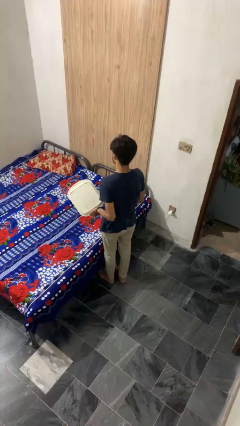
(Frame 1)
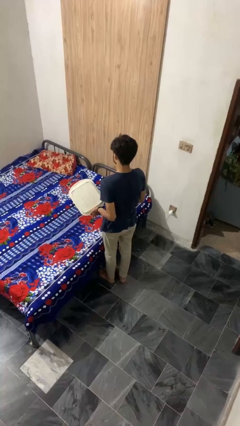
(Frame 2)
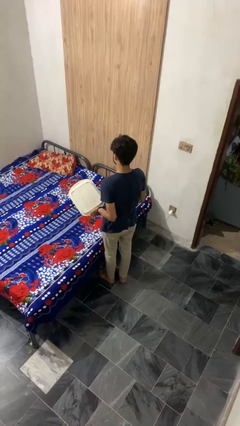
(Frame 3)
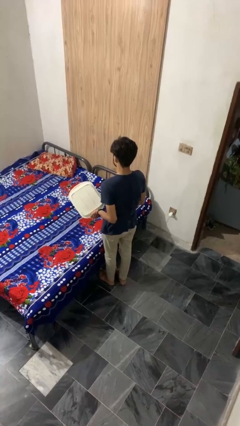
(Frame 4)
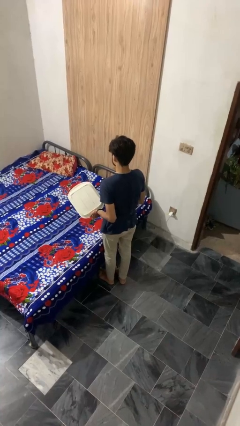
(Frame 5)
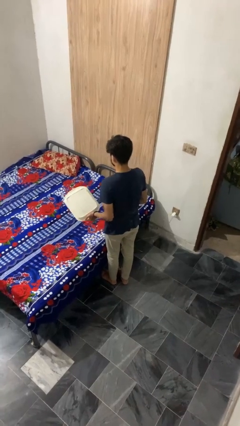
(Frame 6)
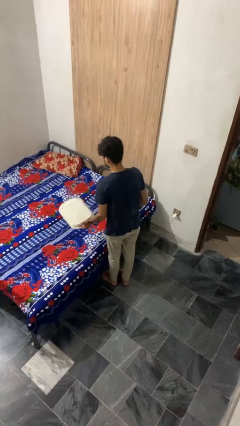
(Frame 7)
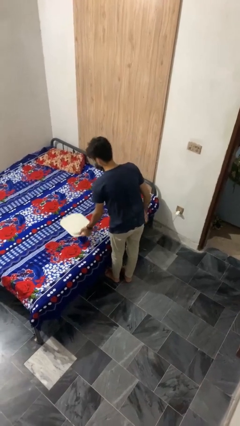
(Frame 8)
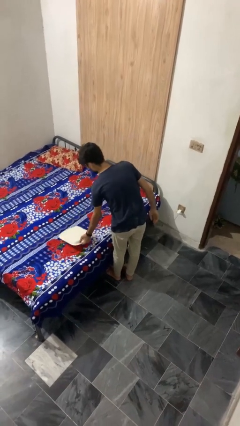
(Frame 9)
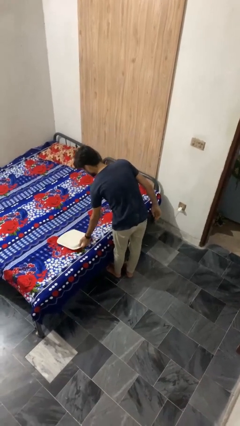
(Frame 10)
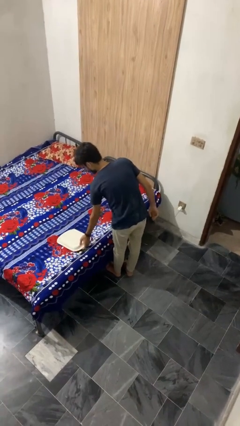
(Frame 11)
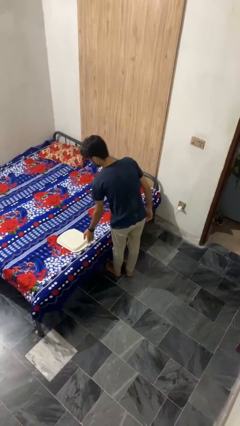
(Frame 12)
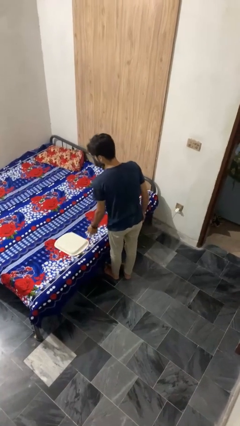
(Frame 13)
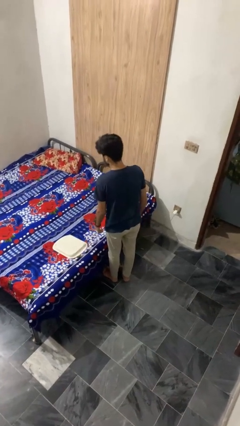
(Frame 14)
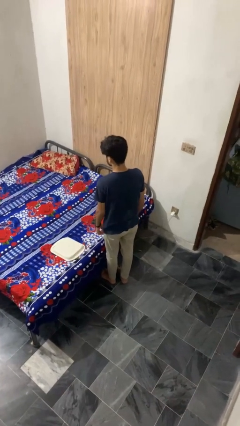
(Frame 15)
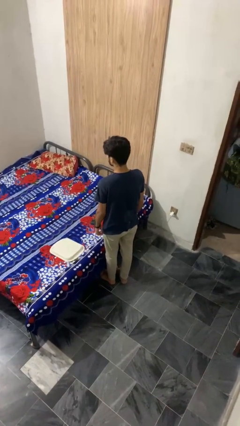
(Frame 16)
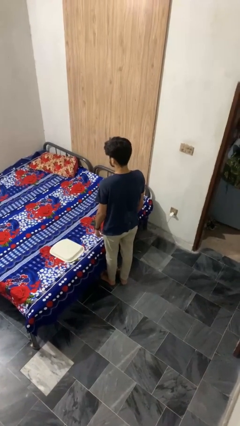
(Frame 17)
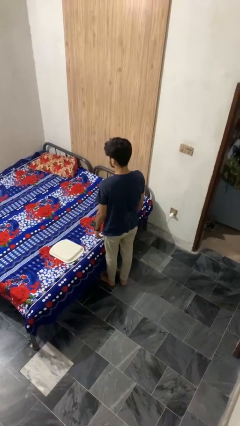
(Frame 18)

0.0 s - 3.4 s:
person puts down object on bed

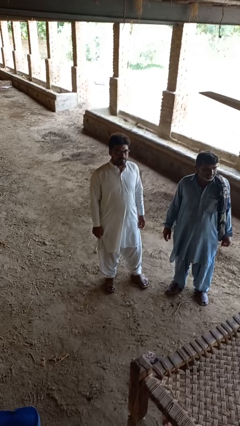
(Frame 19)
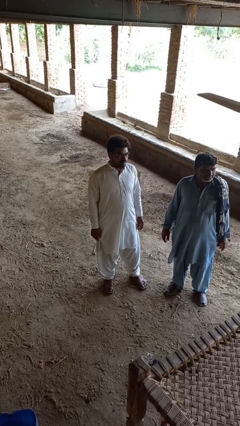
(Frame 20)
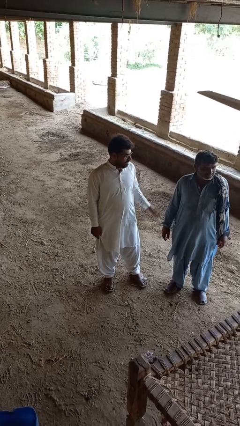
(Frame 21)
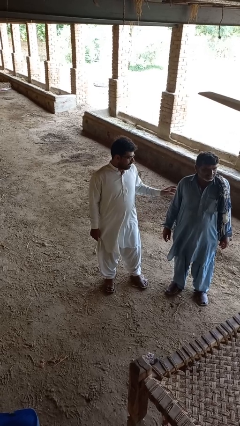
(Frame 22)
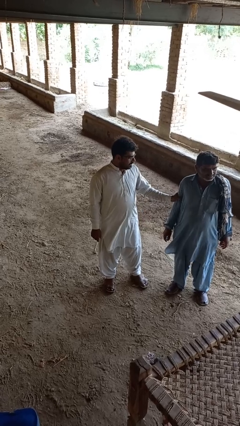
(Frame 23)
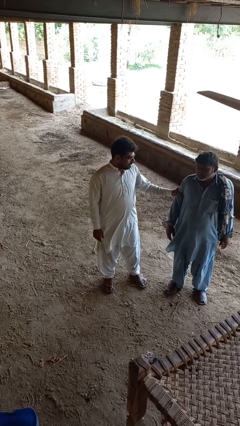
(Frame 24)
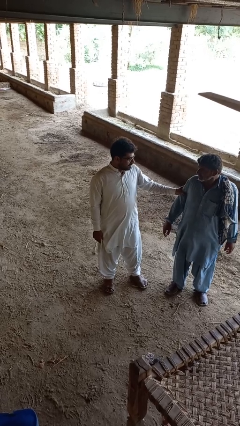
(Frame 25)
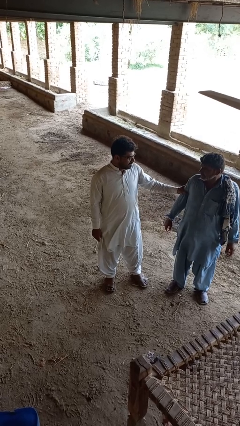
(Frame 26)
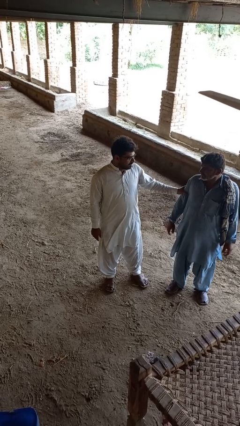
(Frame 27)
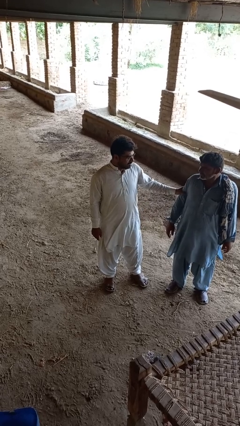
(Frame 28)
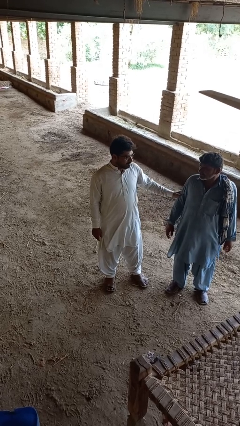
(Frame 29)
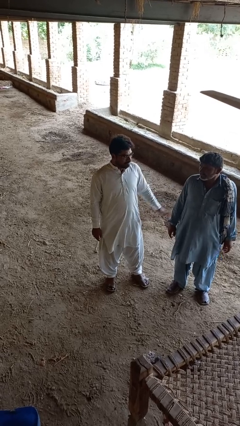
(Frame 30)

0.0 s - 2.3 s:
person grabs person by bicep

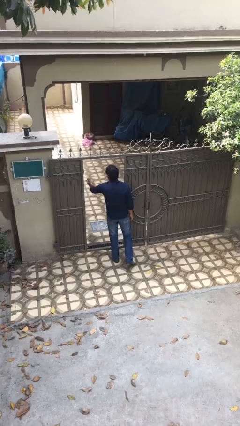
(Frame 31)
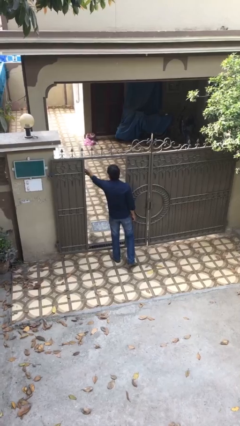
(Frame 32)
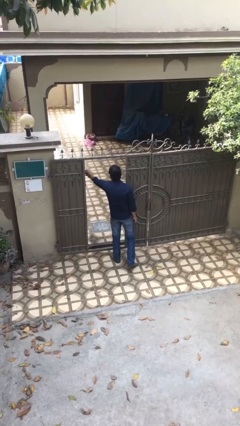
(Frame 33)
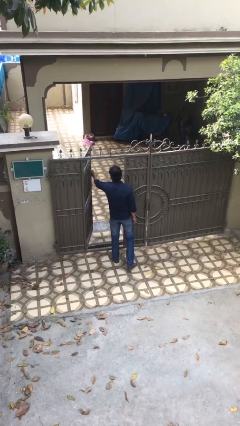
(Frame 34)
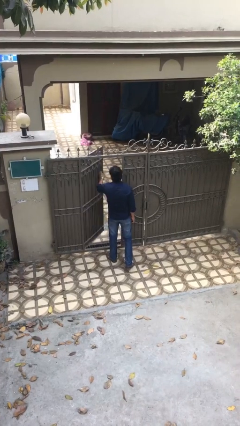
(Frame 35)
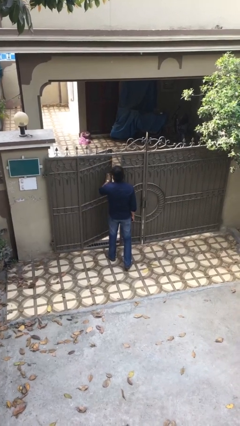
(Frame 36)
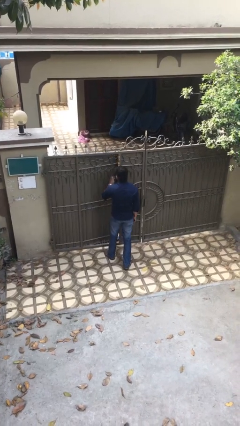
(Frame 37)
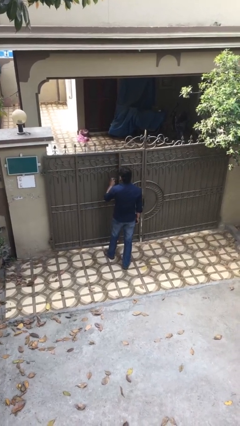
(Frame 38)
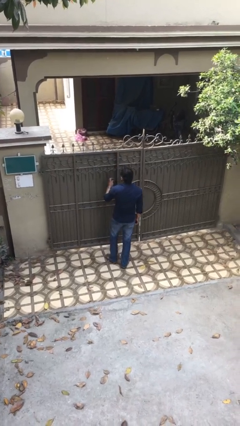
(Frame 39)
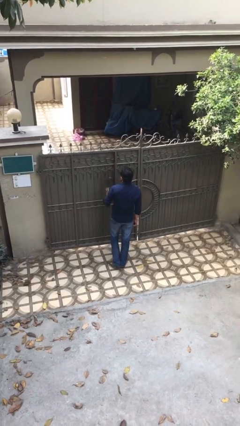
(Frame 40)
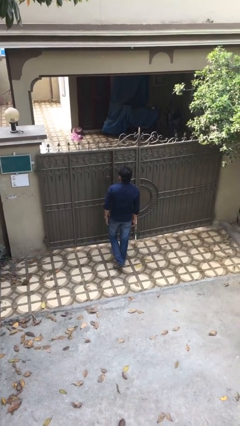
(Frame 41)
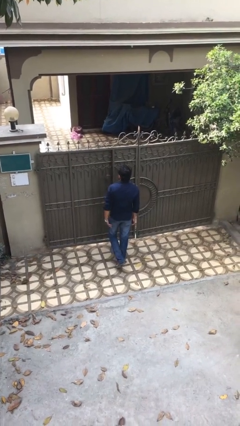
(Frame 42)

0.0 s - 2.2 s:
person closes facility door

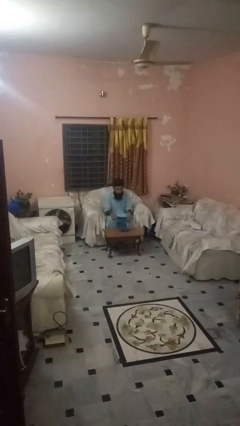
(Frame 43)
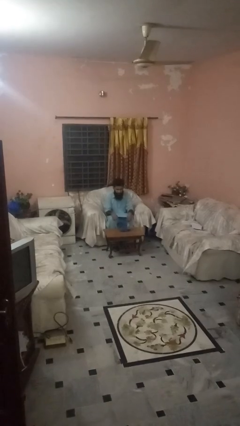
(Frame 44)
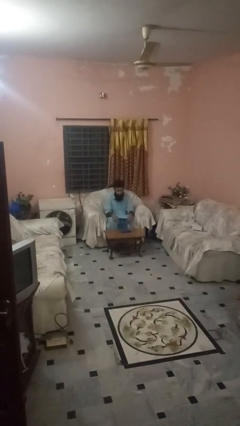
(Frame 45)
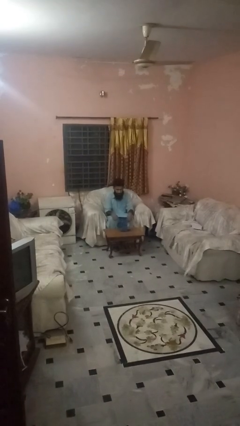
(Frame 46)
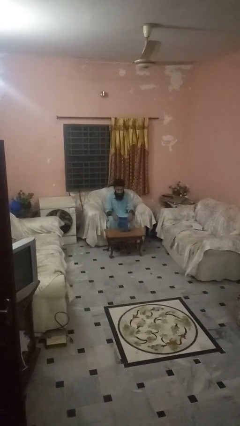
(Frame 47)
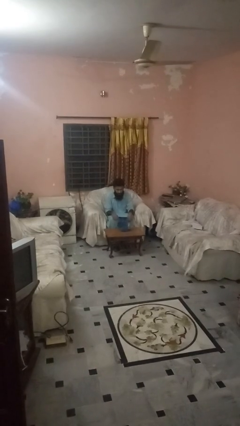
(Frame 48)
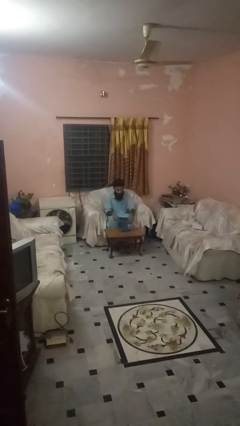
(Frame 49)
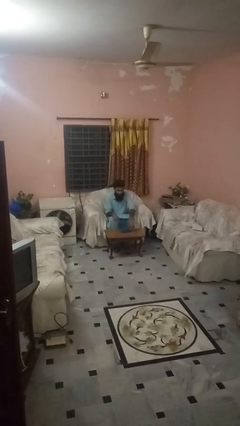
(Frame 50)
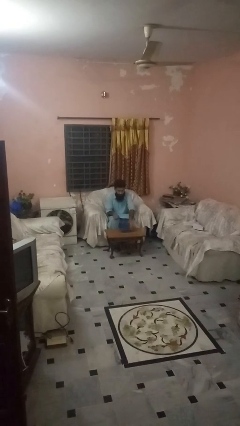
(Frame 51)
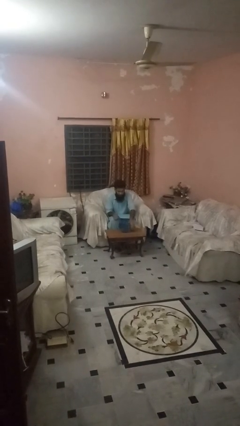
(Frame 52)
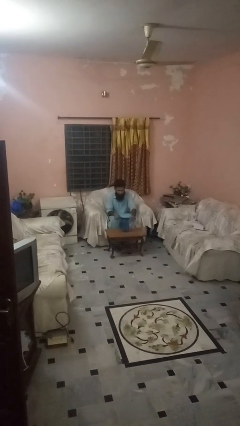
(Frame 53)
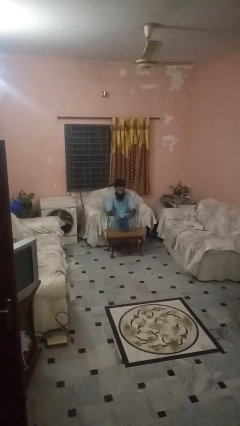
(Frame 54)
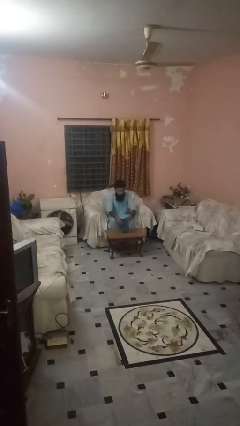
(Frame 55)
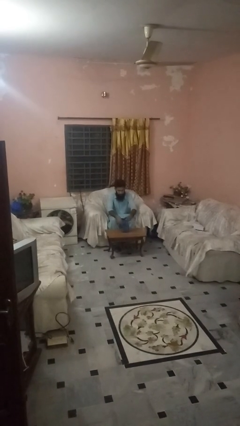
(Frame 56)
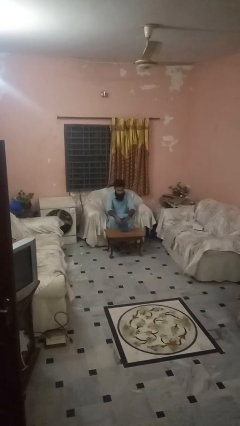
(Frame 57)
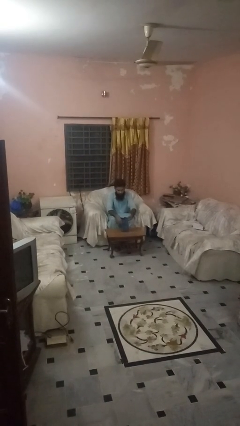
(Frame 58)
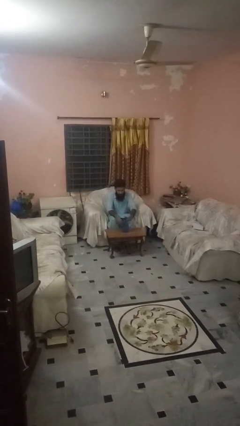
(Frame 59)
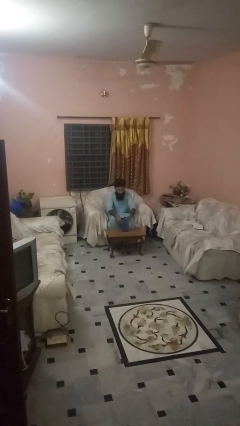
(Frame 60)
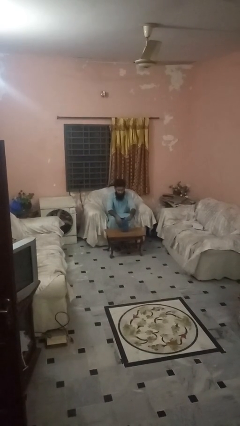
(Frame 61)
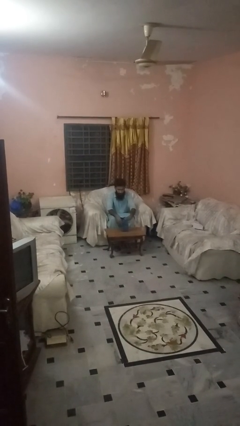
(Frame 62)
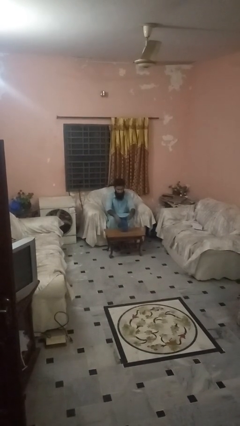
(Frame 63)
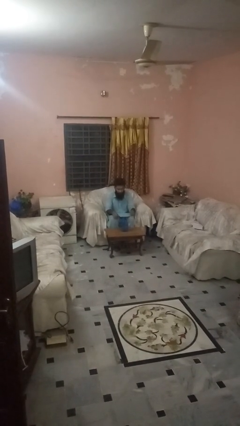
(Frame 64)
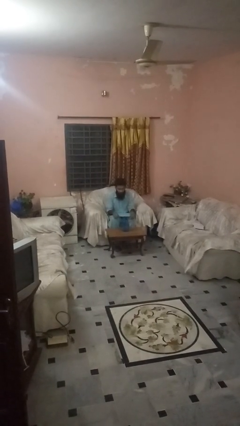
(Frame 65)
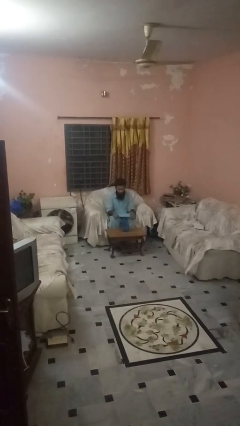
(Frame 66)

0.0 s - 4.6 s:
person screws lid to bottle

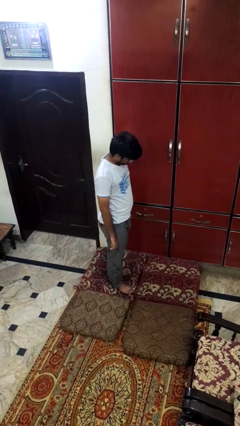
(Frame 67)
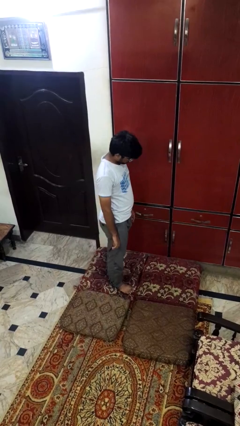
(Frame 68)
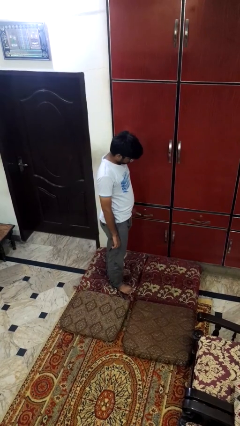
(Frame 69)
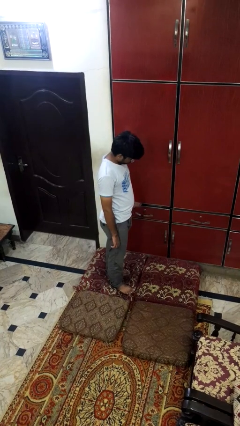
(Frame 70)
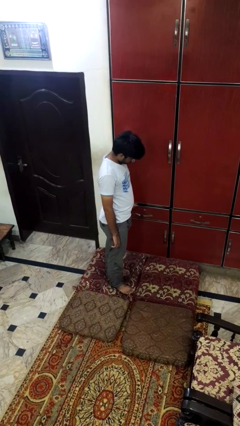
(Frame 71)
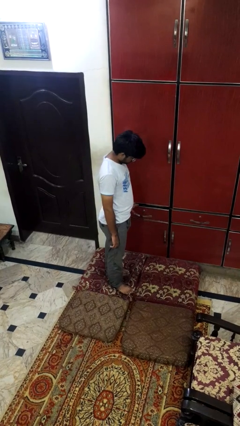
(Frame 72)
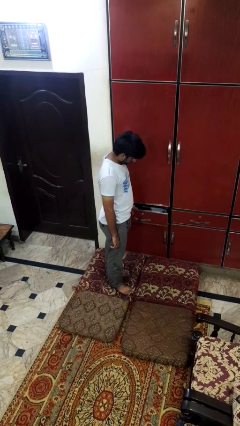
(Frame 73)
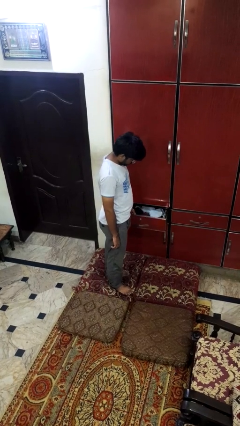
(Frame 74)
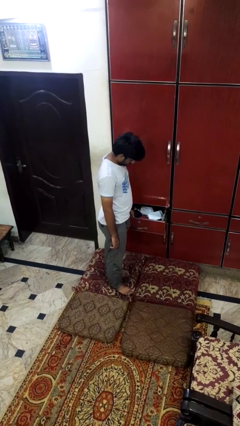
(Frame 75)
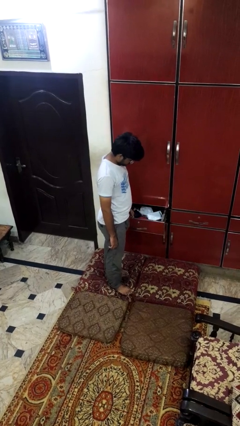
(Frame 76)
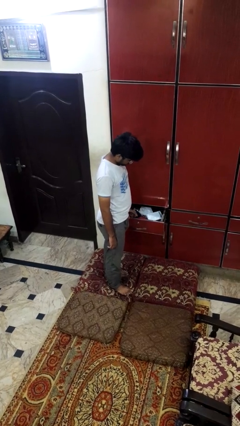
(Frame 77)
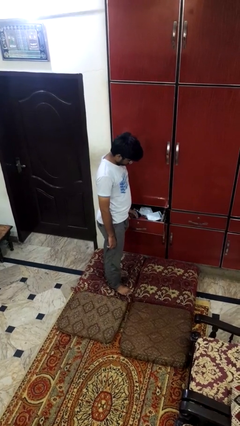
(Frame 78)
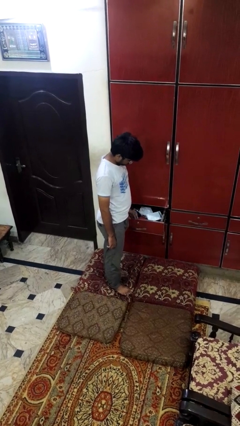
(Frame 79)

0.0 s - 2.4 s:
person opens dresser drawer

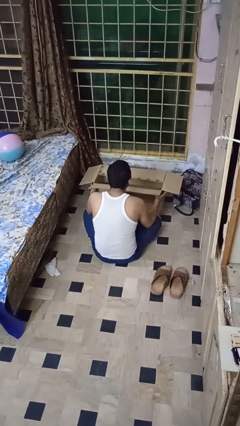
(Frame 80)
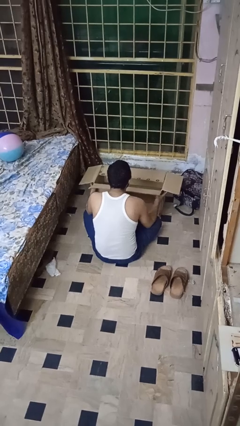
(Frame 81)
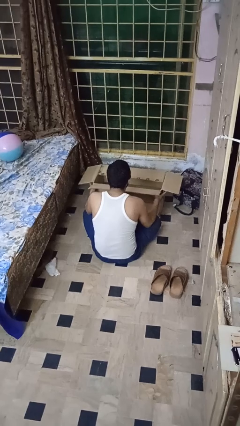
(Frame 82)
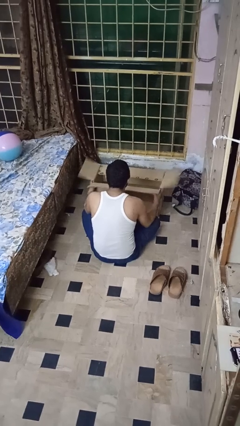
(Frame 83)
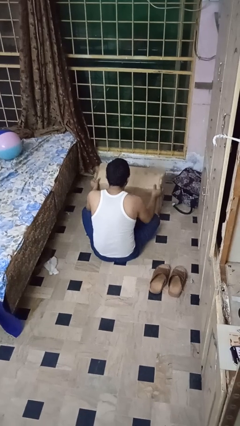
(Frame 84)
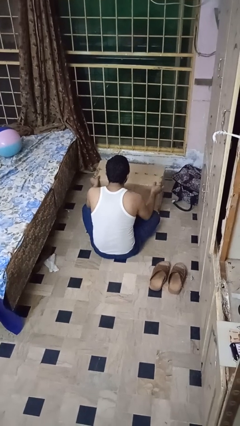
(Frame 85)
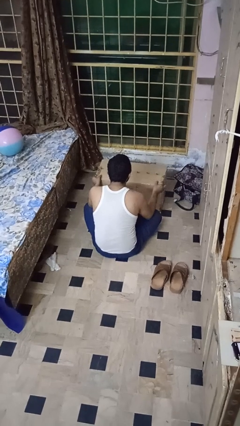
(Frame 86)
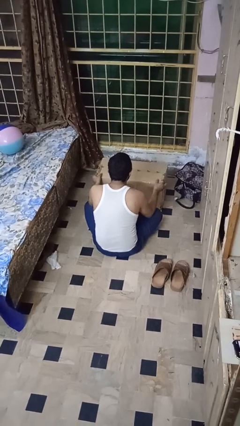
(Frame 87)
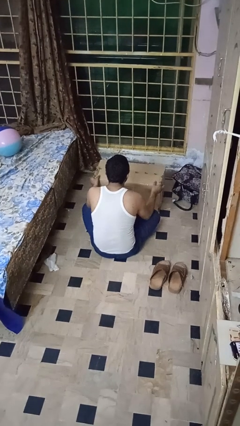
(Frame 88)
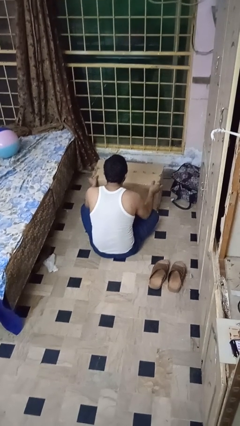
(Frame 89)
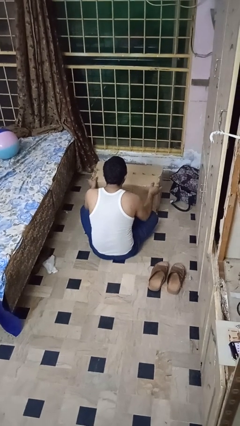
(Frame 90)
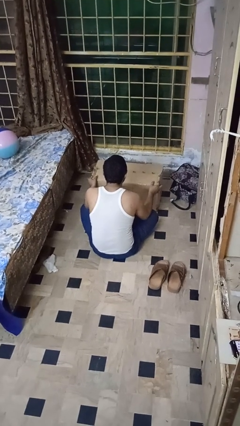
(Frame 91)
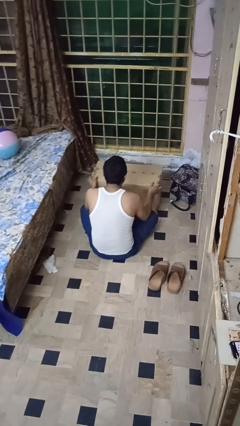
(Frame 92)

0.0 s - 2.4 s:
person closes box
